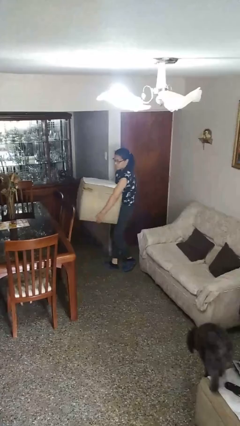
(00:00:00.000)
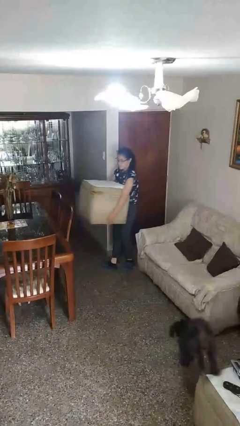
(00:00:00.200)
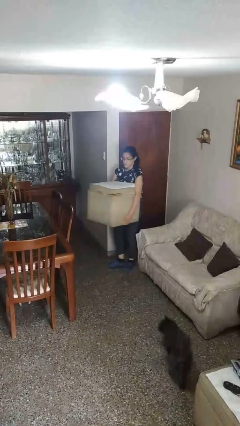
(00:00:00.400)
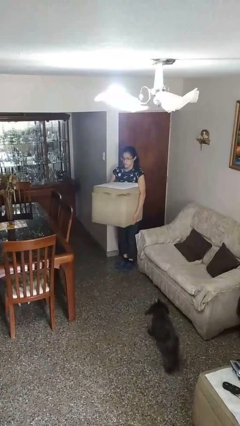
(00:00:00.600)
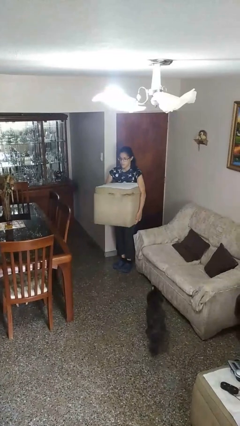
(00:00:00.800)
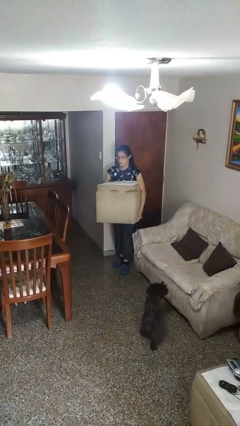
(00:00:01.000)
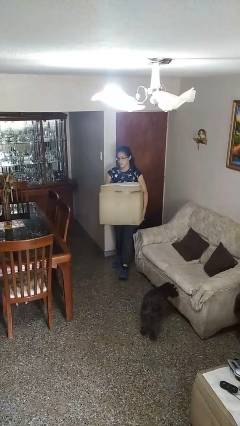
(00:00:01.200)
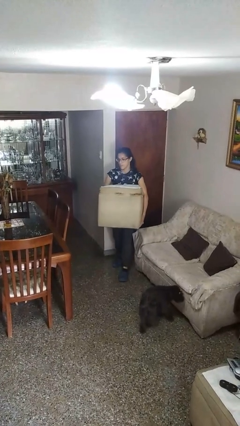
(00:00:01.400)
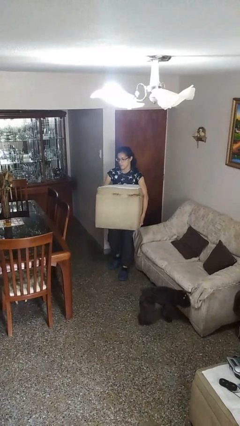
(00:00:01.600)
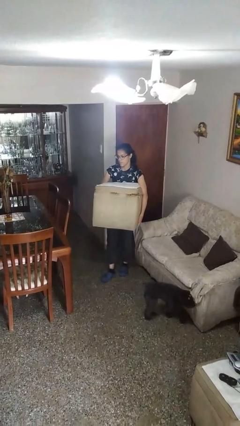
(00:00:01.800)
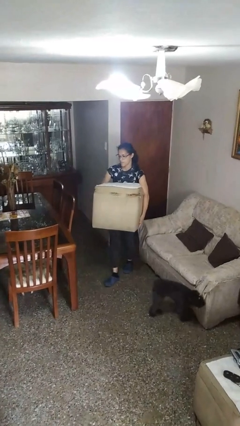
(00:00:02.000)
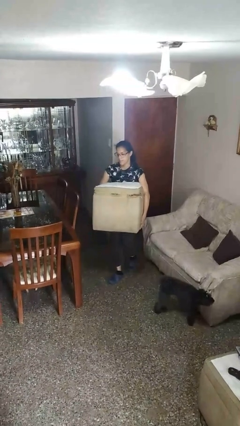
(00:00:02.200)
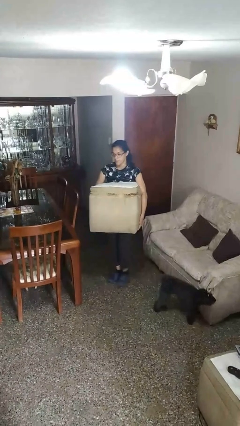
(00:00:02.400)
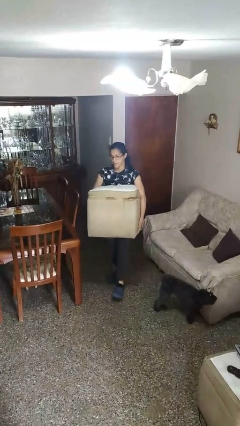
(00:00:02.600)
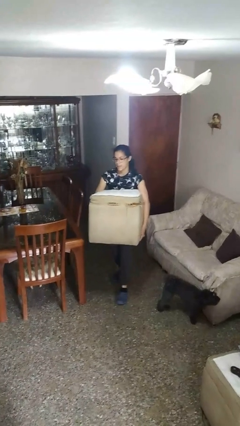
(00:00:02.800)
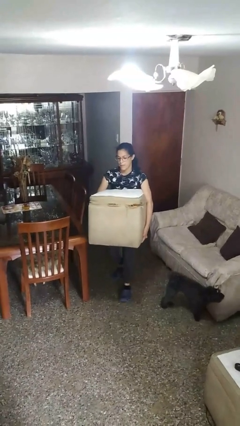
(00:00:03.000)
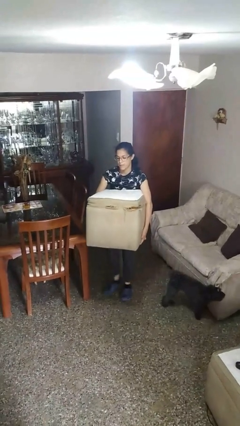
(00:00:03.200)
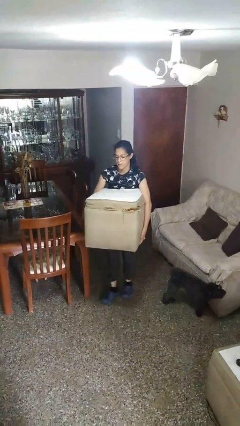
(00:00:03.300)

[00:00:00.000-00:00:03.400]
person carries furniture

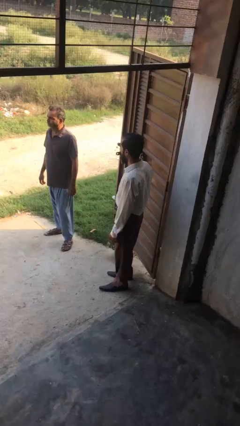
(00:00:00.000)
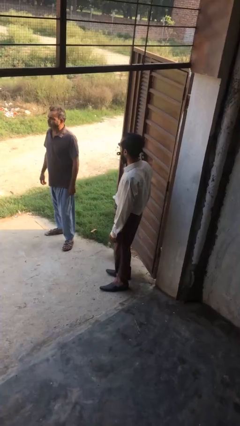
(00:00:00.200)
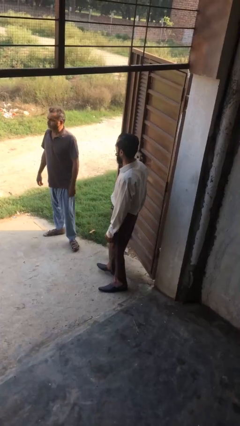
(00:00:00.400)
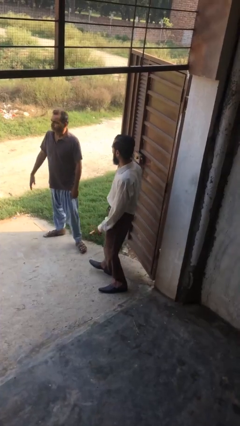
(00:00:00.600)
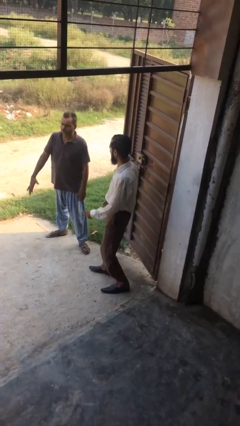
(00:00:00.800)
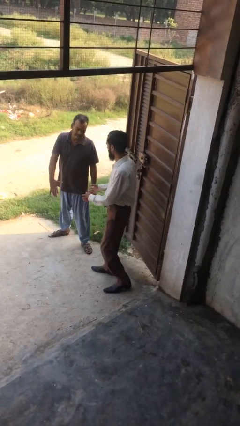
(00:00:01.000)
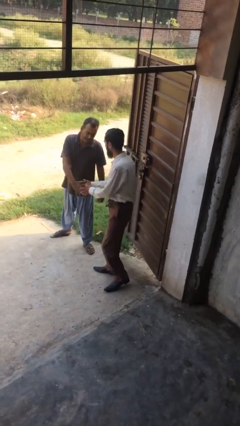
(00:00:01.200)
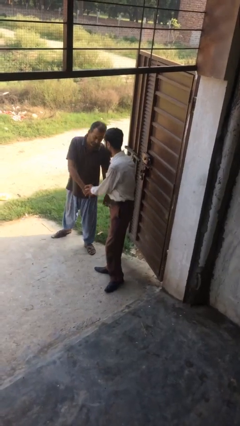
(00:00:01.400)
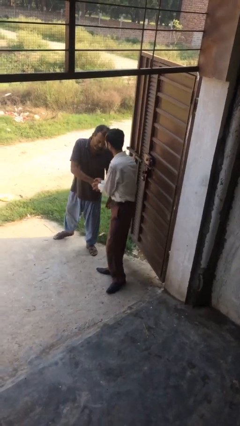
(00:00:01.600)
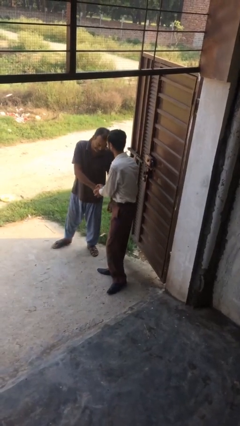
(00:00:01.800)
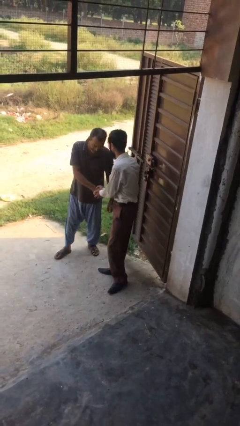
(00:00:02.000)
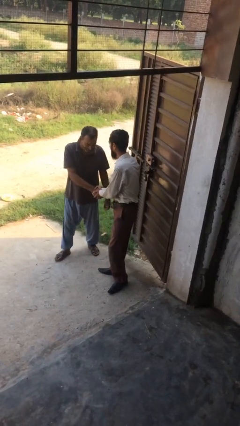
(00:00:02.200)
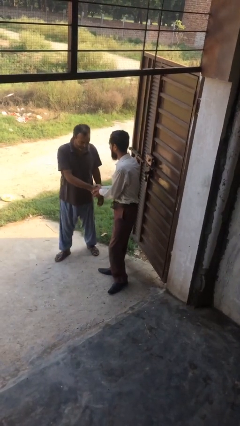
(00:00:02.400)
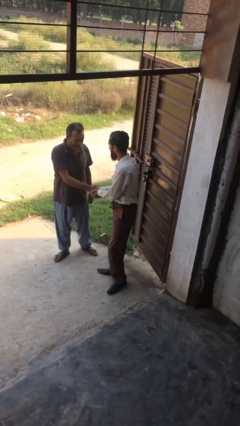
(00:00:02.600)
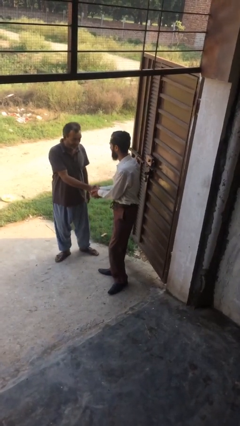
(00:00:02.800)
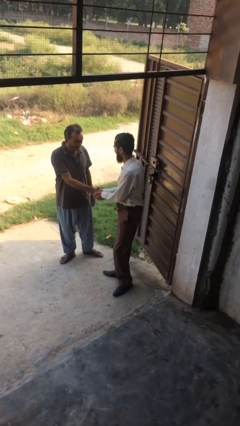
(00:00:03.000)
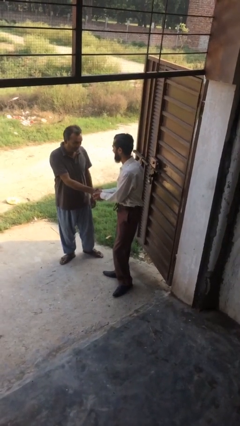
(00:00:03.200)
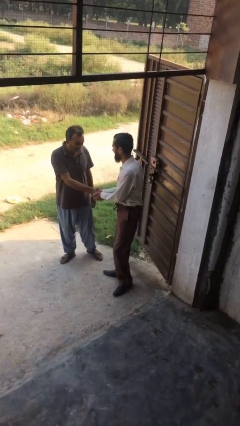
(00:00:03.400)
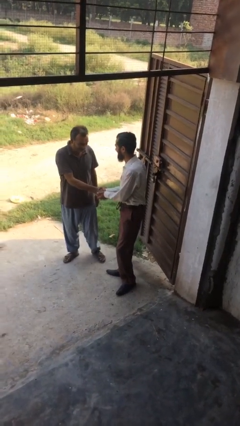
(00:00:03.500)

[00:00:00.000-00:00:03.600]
person shakes hand

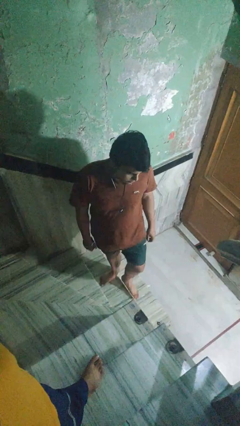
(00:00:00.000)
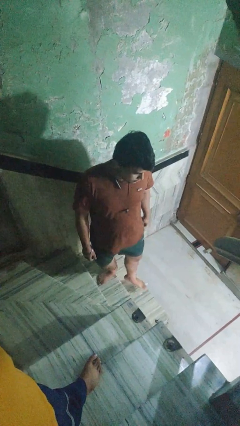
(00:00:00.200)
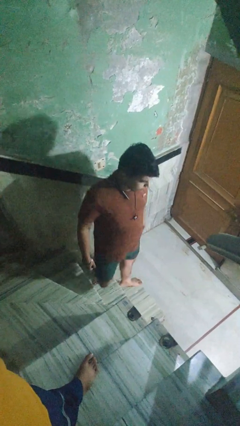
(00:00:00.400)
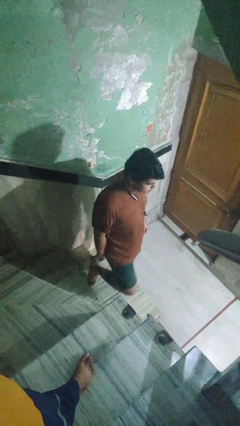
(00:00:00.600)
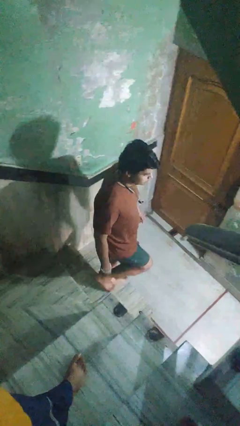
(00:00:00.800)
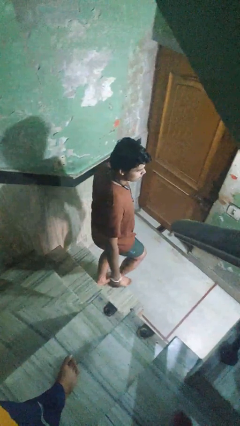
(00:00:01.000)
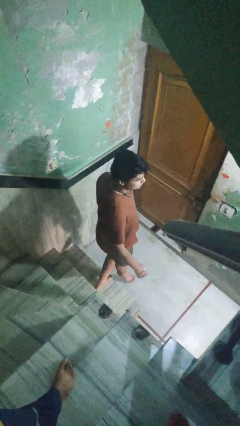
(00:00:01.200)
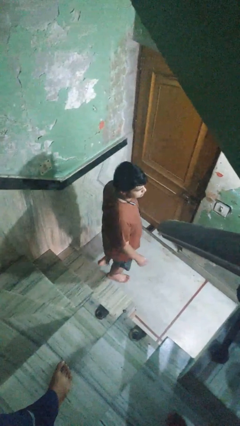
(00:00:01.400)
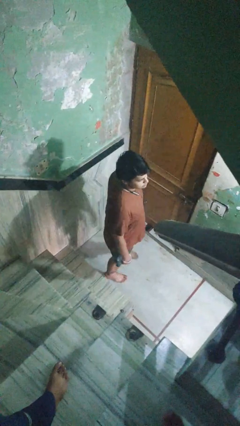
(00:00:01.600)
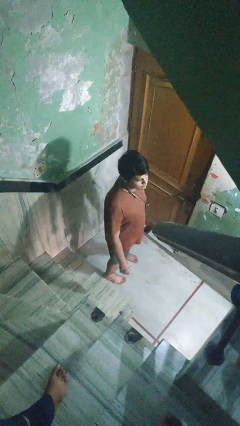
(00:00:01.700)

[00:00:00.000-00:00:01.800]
person climbs down stairs

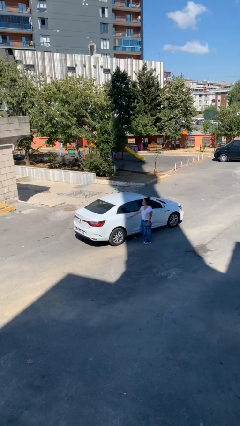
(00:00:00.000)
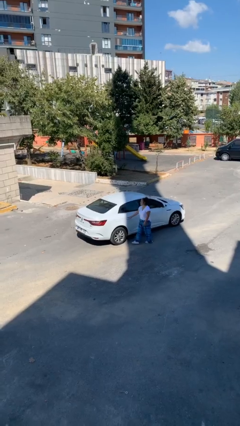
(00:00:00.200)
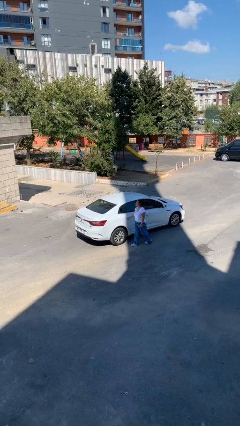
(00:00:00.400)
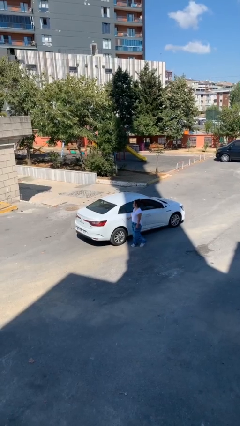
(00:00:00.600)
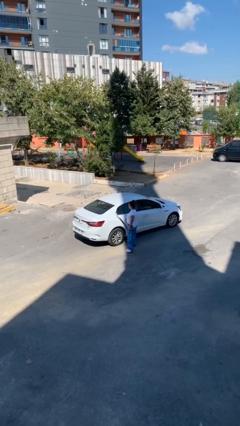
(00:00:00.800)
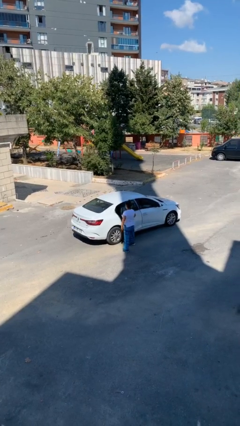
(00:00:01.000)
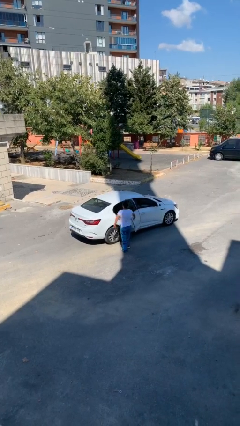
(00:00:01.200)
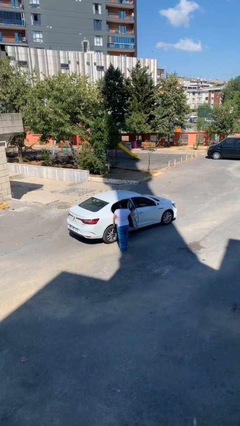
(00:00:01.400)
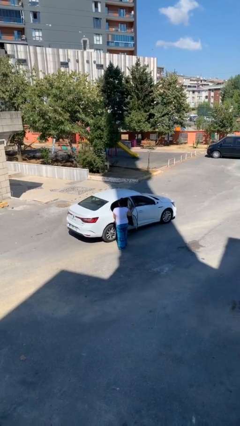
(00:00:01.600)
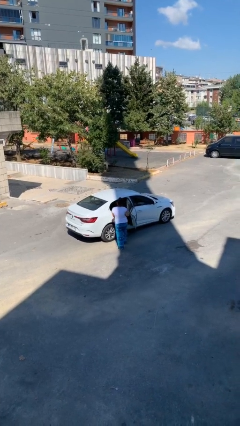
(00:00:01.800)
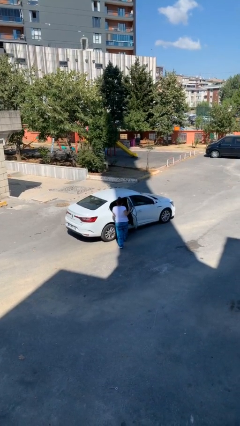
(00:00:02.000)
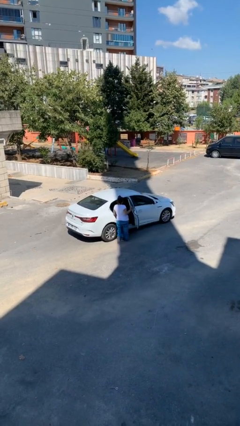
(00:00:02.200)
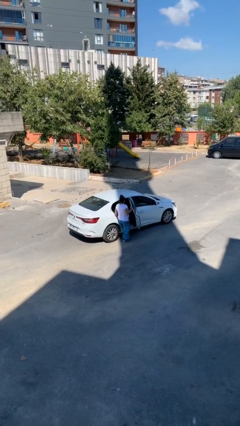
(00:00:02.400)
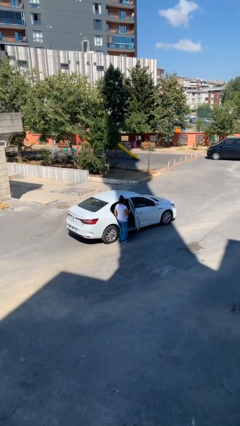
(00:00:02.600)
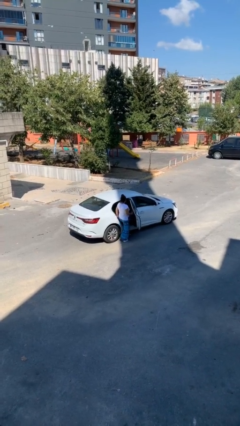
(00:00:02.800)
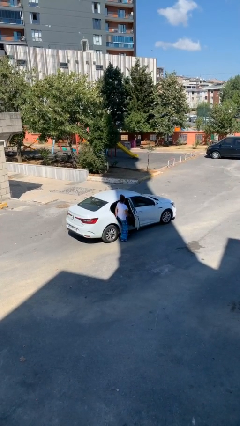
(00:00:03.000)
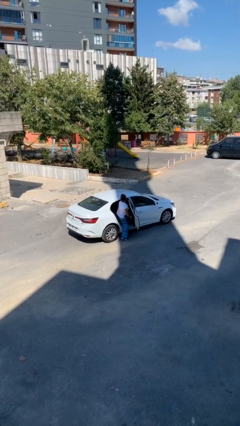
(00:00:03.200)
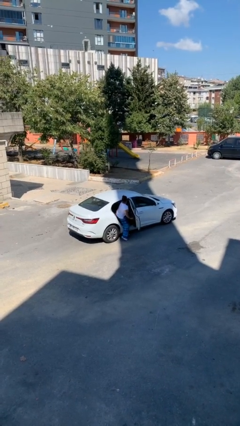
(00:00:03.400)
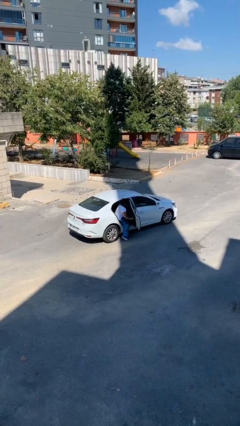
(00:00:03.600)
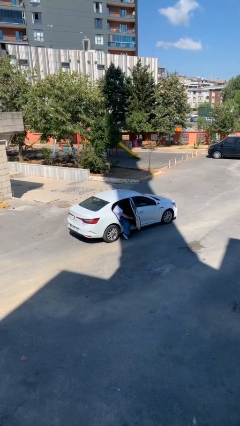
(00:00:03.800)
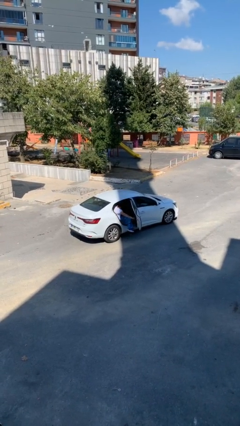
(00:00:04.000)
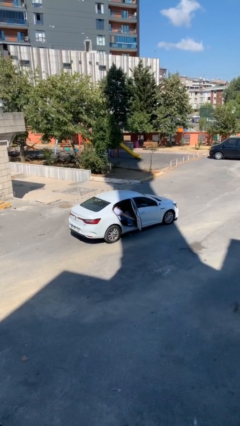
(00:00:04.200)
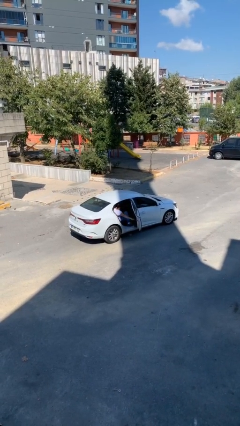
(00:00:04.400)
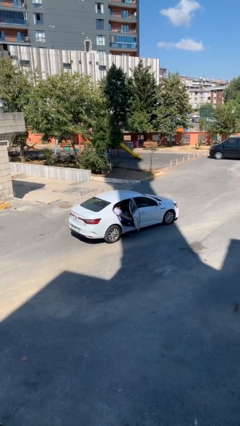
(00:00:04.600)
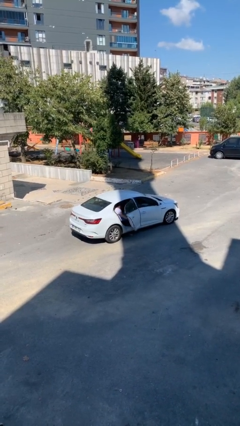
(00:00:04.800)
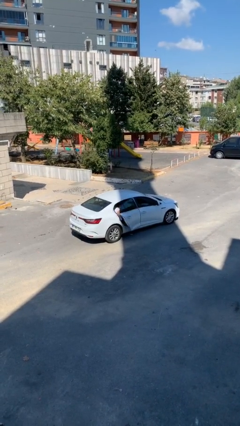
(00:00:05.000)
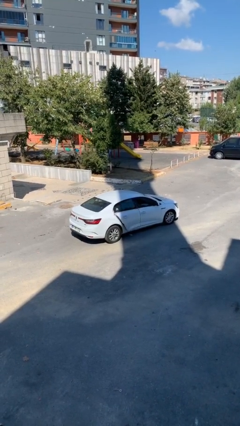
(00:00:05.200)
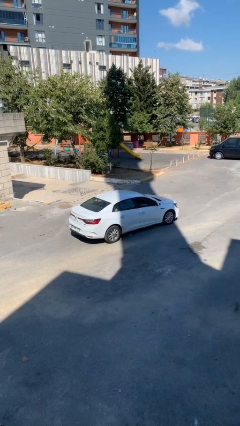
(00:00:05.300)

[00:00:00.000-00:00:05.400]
car picks up person

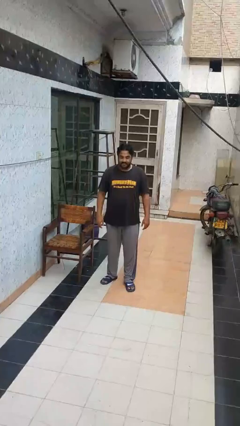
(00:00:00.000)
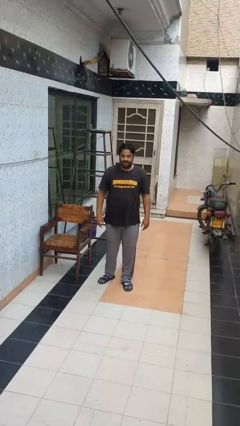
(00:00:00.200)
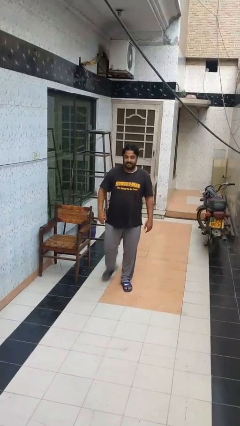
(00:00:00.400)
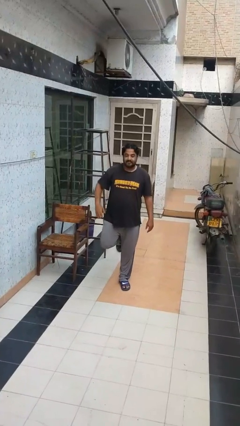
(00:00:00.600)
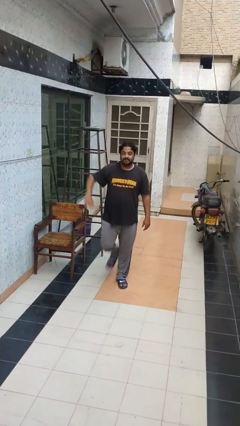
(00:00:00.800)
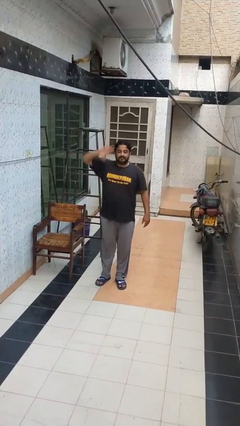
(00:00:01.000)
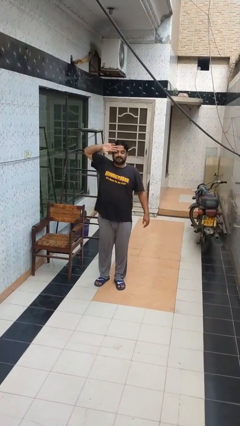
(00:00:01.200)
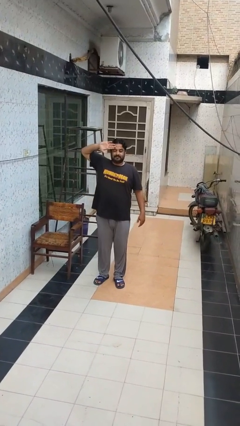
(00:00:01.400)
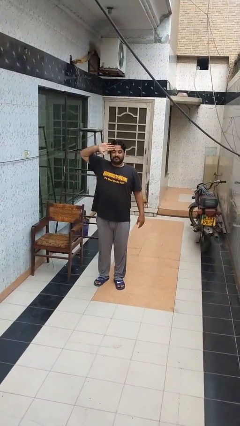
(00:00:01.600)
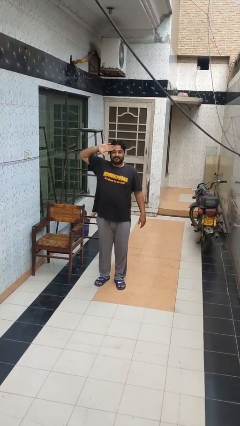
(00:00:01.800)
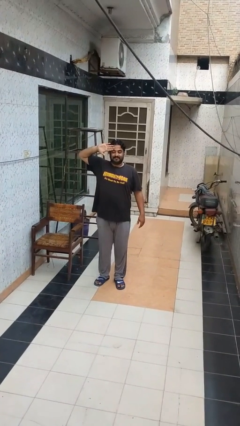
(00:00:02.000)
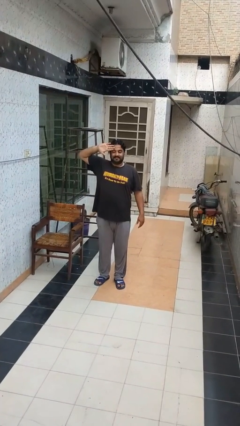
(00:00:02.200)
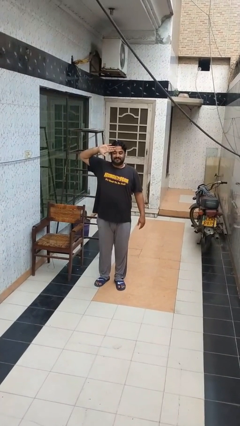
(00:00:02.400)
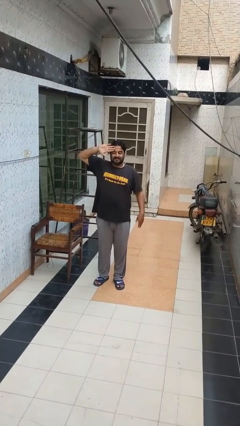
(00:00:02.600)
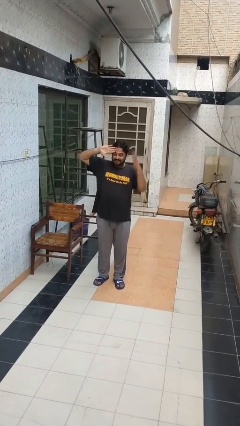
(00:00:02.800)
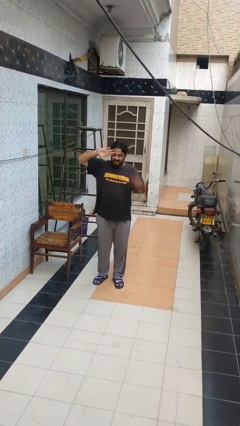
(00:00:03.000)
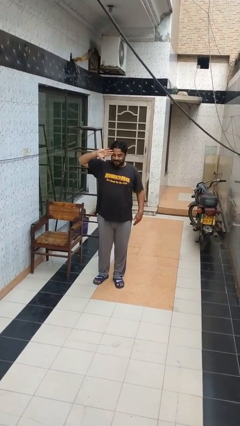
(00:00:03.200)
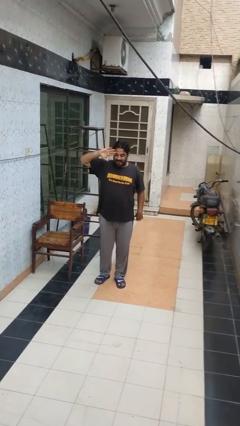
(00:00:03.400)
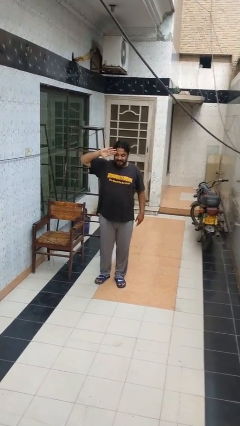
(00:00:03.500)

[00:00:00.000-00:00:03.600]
person salutes
